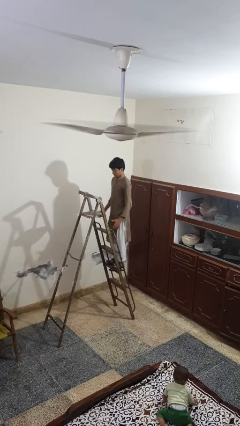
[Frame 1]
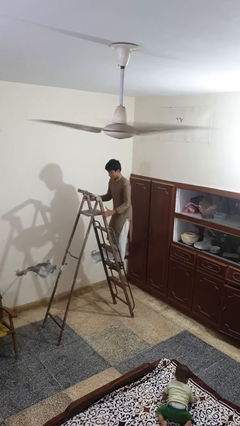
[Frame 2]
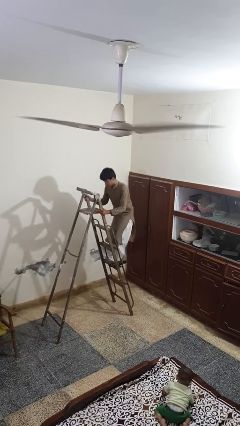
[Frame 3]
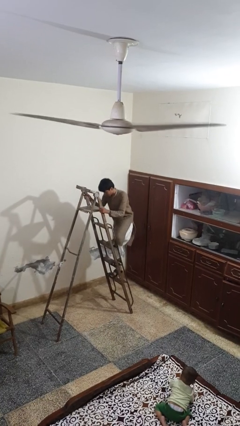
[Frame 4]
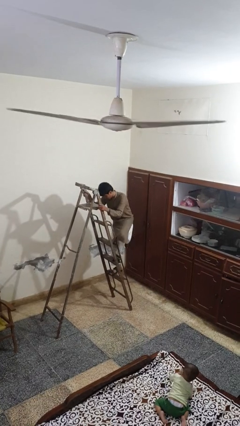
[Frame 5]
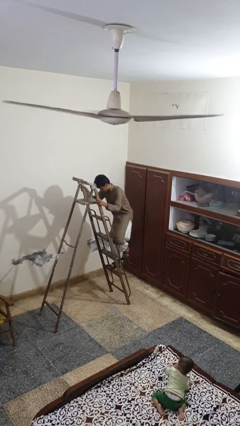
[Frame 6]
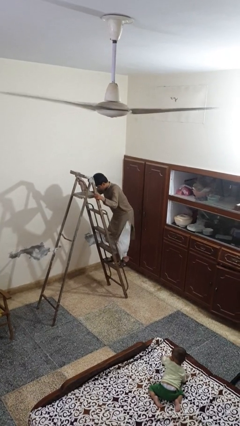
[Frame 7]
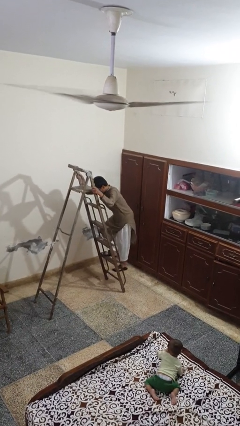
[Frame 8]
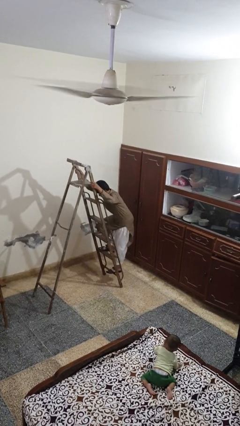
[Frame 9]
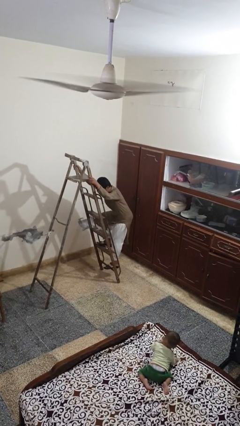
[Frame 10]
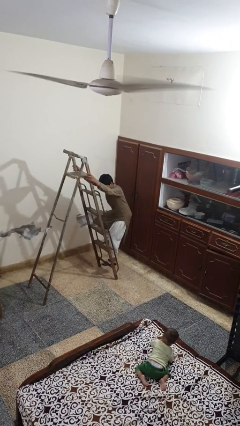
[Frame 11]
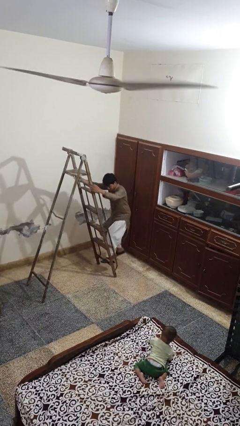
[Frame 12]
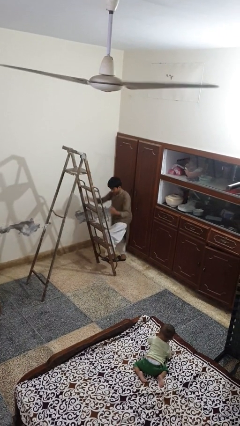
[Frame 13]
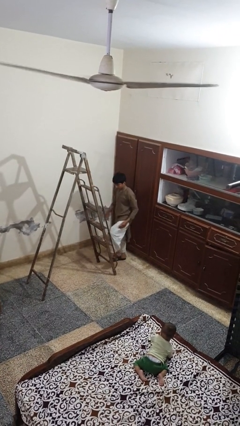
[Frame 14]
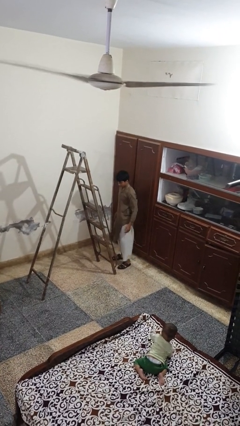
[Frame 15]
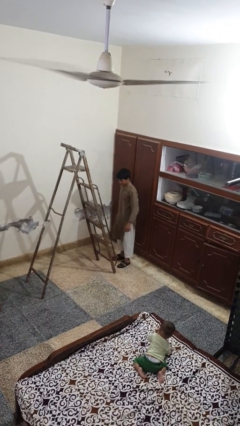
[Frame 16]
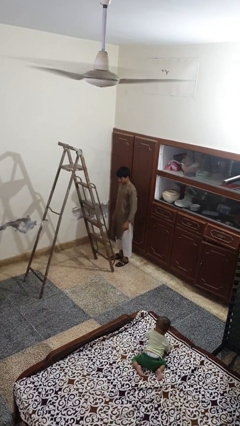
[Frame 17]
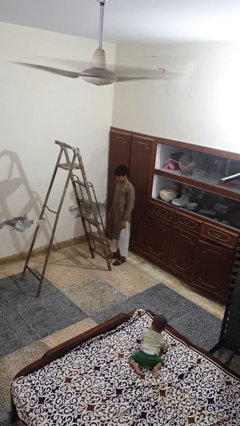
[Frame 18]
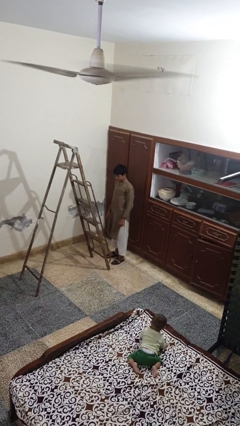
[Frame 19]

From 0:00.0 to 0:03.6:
person climbs down ladder

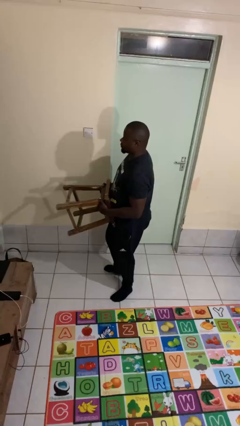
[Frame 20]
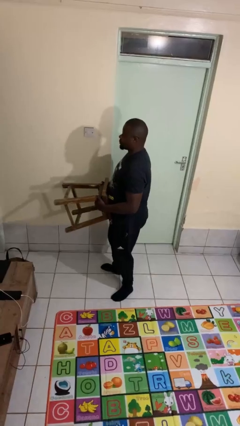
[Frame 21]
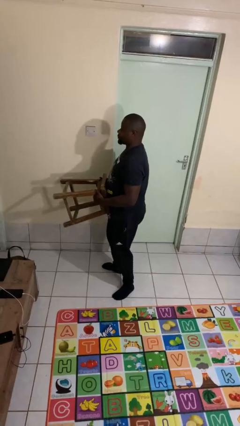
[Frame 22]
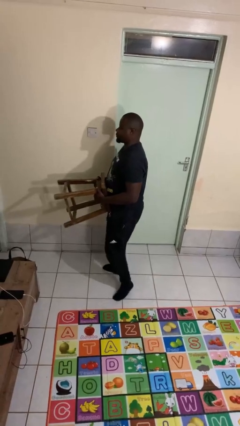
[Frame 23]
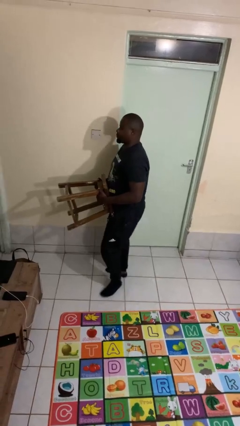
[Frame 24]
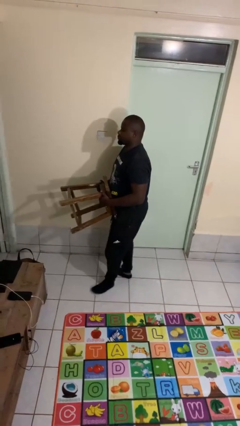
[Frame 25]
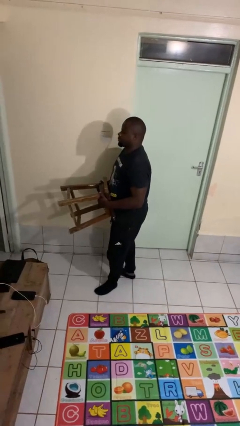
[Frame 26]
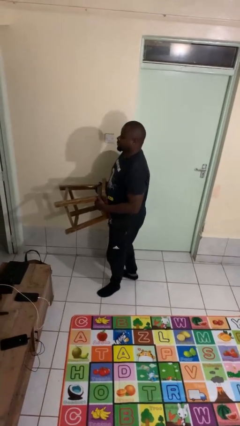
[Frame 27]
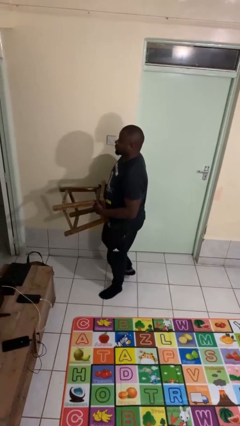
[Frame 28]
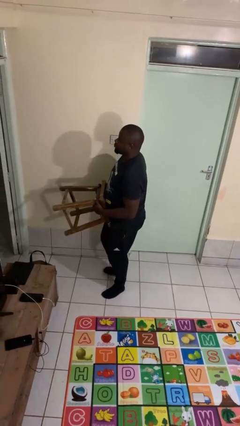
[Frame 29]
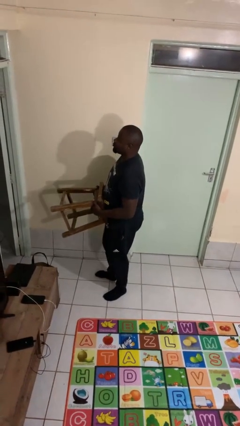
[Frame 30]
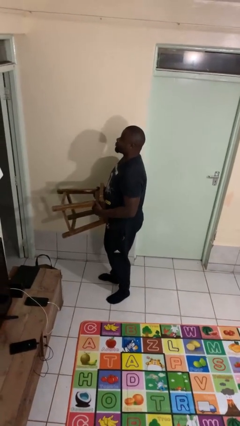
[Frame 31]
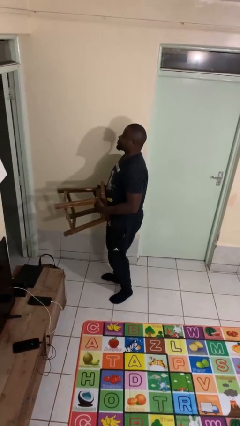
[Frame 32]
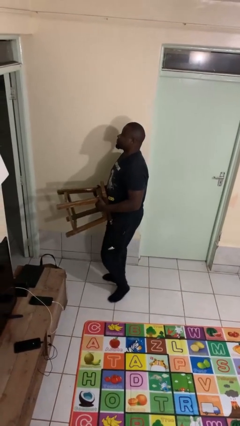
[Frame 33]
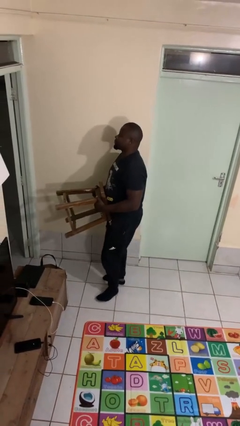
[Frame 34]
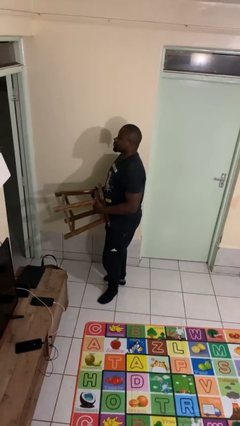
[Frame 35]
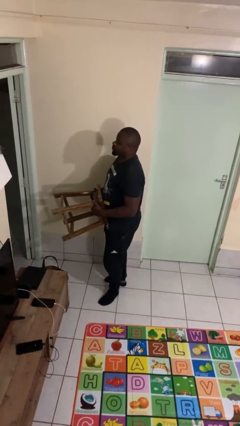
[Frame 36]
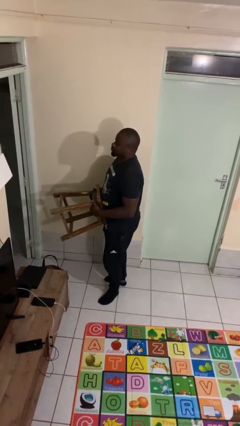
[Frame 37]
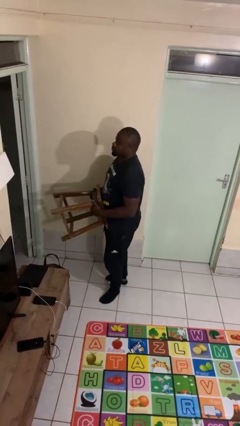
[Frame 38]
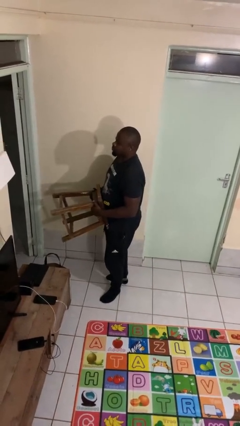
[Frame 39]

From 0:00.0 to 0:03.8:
person carries furniture

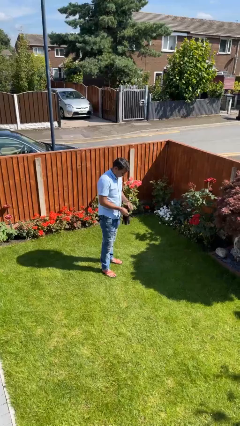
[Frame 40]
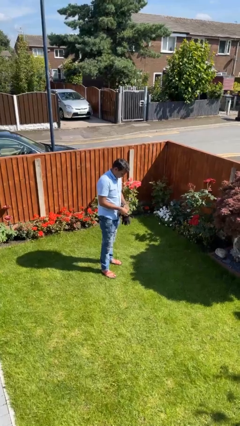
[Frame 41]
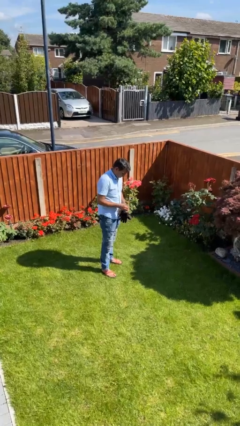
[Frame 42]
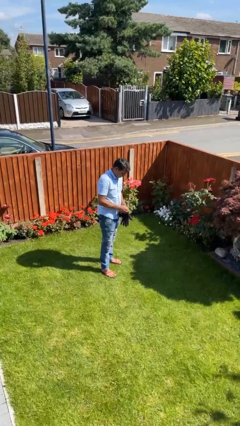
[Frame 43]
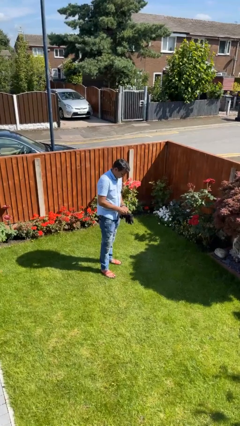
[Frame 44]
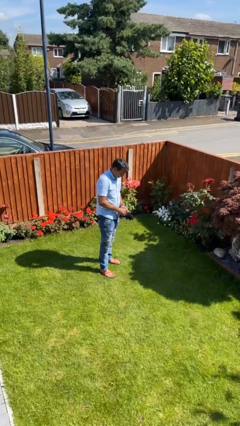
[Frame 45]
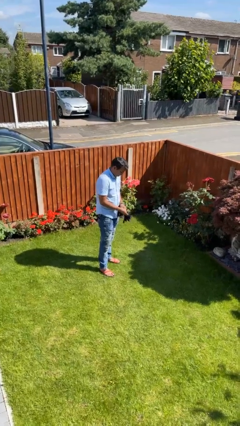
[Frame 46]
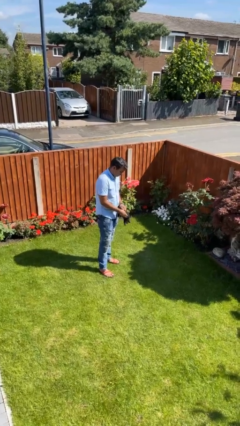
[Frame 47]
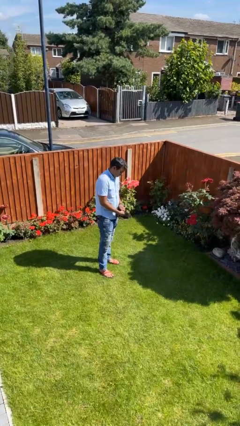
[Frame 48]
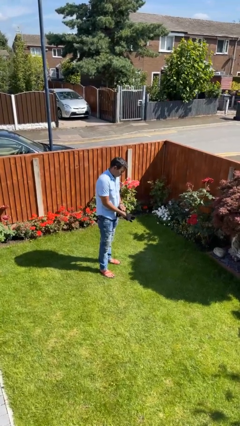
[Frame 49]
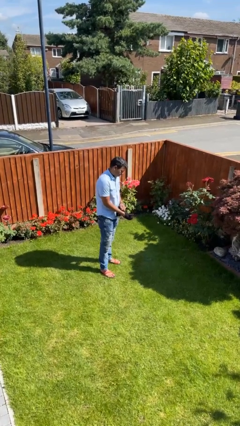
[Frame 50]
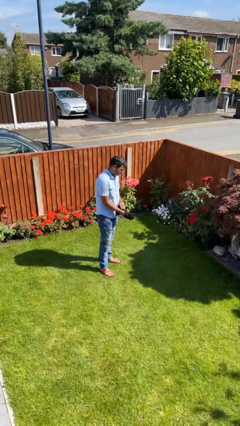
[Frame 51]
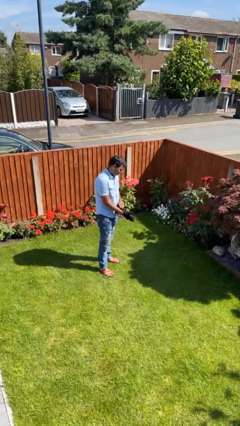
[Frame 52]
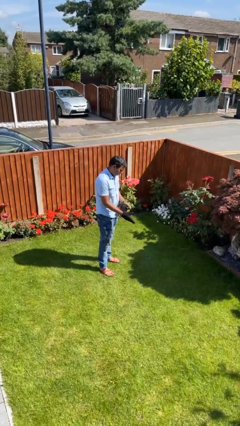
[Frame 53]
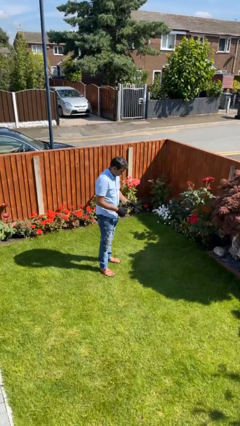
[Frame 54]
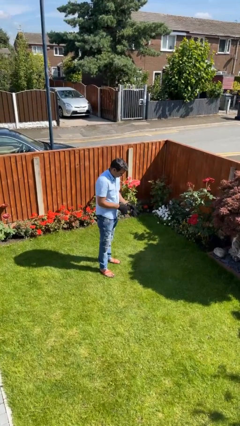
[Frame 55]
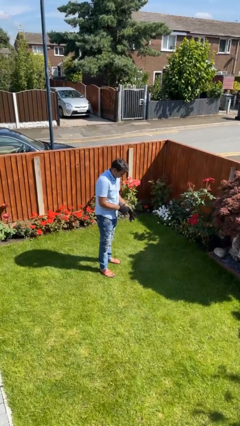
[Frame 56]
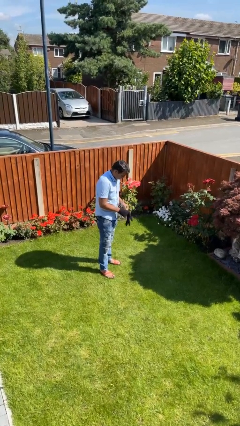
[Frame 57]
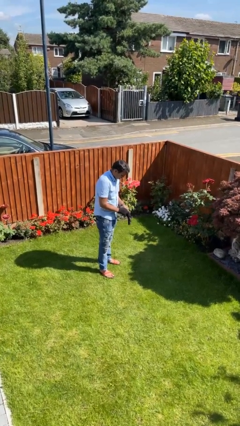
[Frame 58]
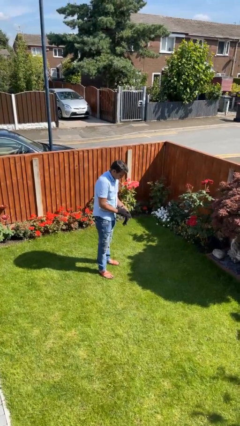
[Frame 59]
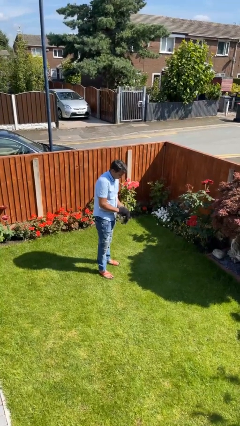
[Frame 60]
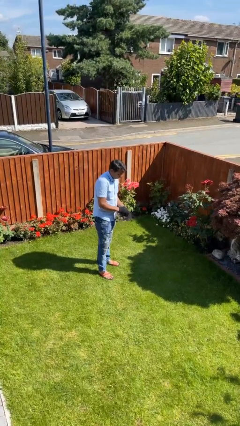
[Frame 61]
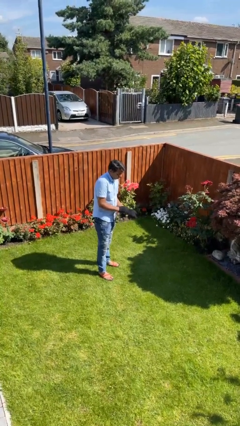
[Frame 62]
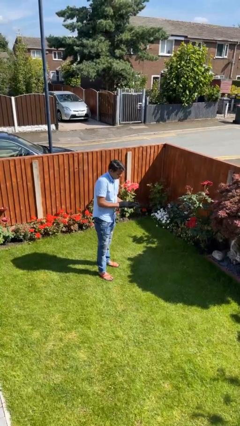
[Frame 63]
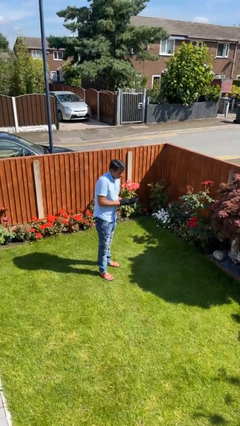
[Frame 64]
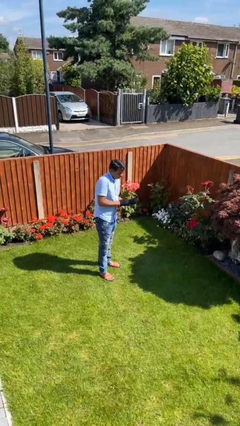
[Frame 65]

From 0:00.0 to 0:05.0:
person puts on gloves

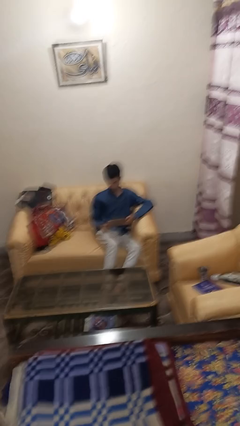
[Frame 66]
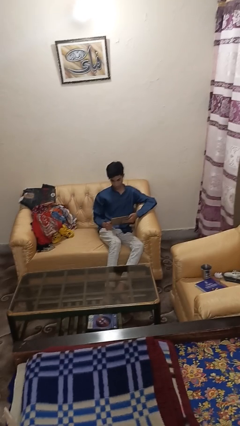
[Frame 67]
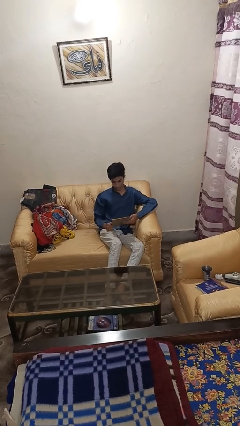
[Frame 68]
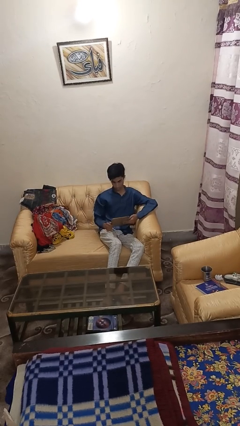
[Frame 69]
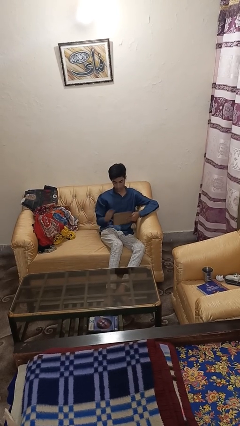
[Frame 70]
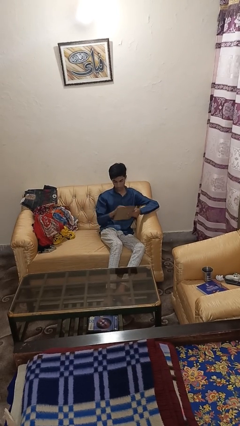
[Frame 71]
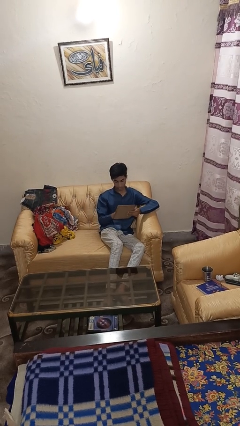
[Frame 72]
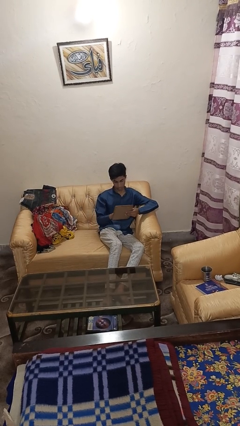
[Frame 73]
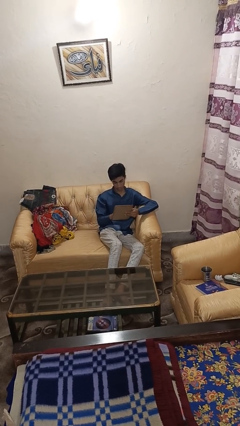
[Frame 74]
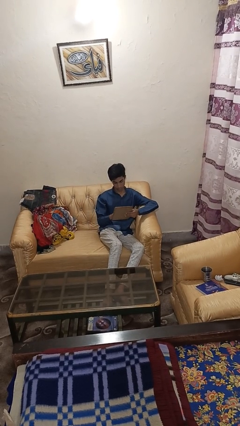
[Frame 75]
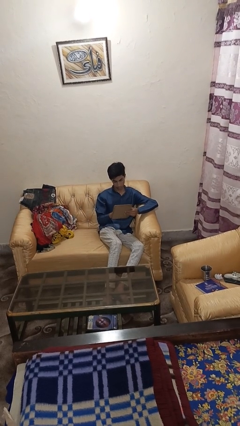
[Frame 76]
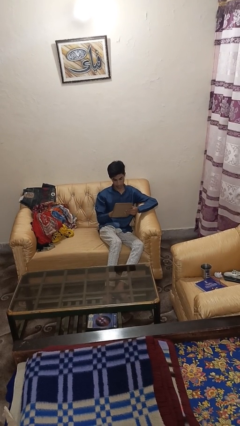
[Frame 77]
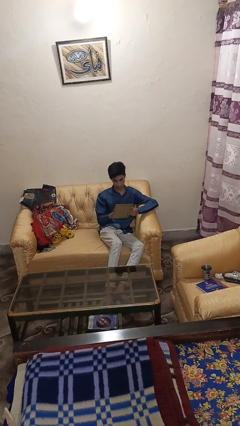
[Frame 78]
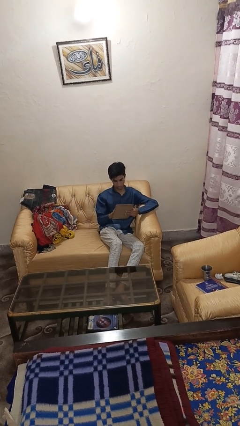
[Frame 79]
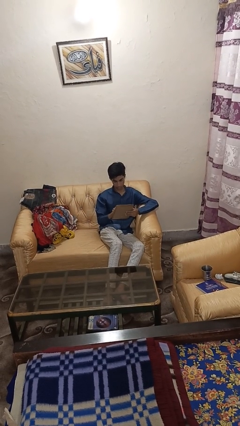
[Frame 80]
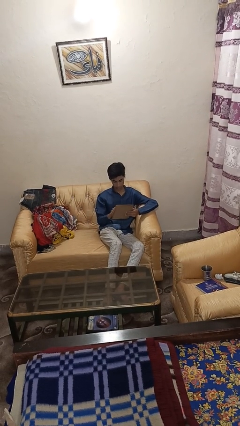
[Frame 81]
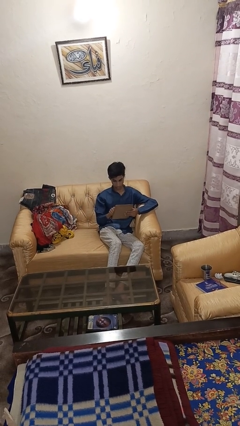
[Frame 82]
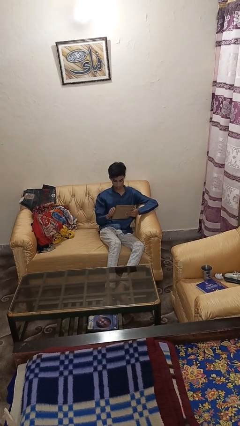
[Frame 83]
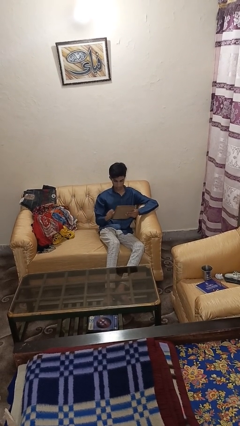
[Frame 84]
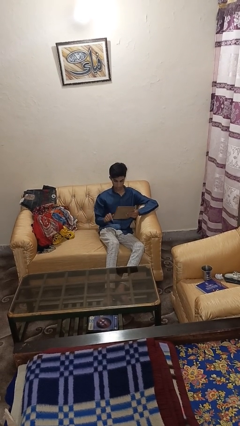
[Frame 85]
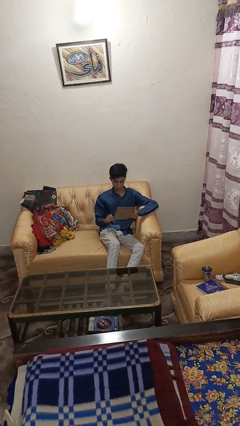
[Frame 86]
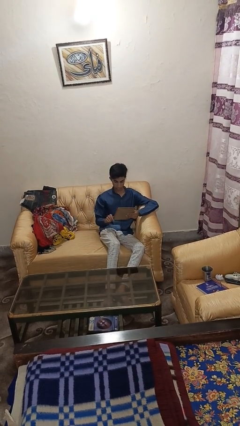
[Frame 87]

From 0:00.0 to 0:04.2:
person interacts with tablet

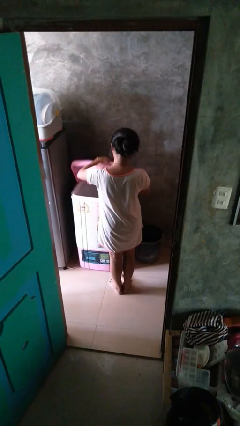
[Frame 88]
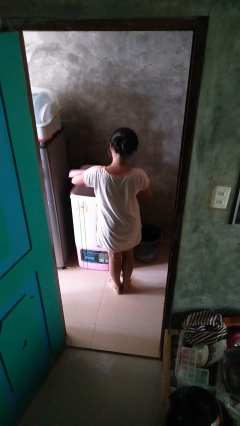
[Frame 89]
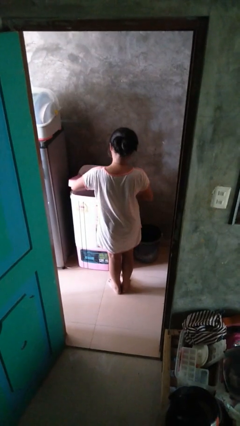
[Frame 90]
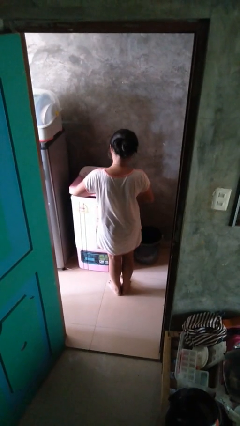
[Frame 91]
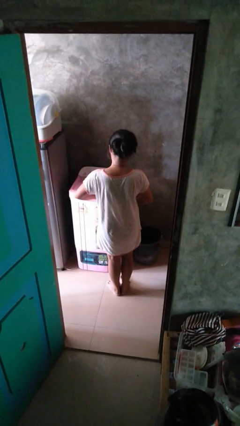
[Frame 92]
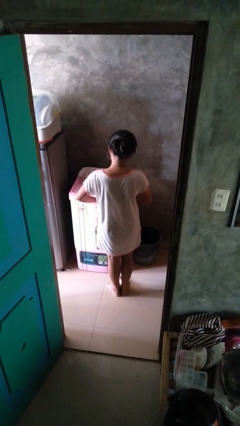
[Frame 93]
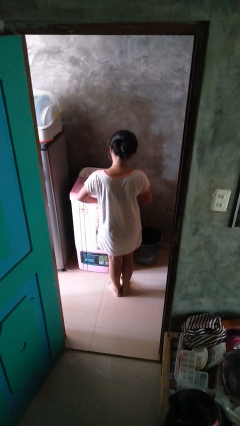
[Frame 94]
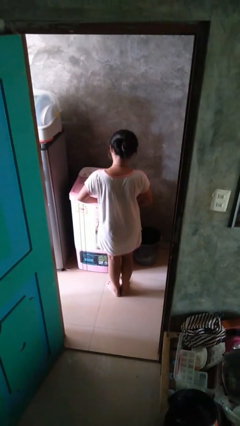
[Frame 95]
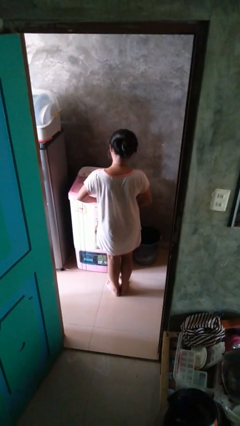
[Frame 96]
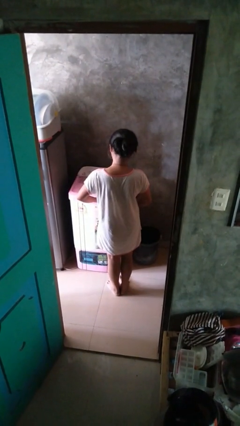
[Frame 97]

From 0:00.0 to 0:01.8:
person closes clothes washer
